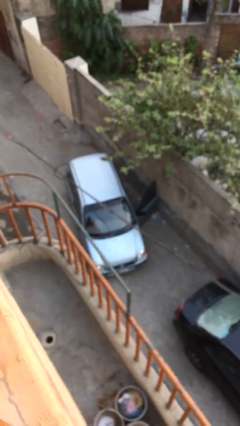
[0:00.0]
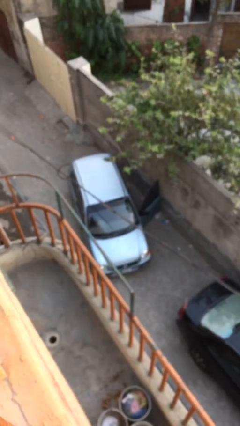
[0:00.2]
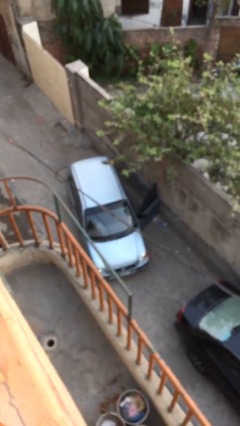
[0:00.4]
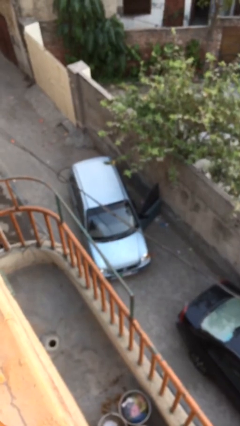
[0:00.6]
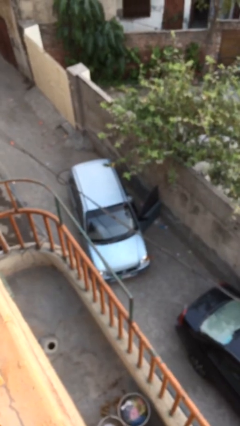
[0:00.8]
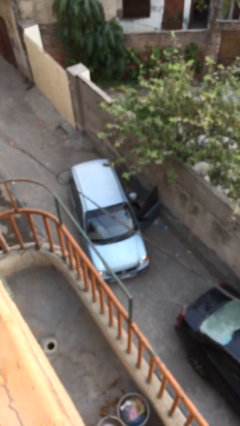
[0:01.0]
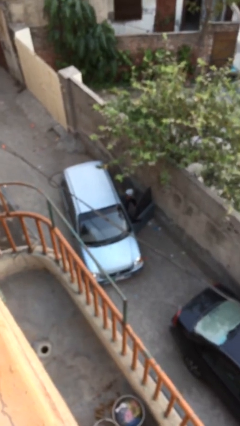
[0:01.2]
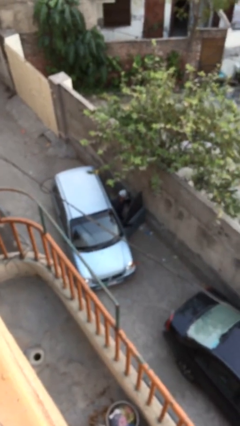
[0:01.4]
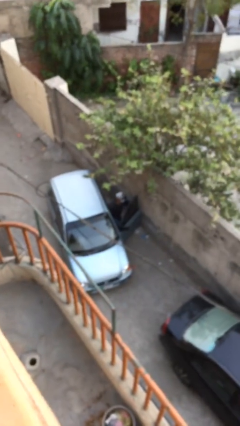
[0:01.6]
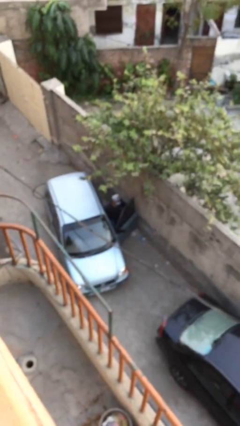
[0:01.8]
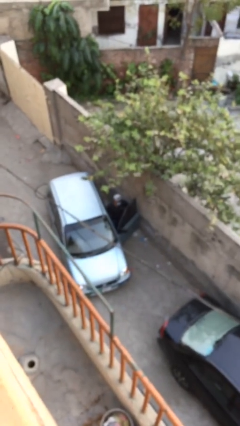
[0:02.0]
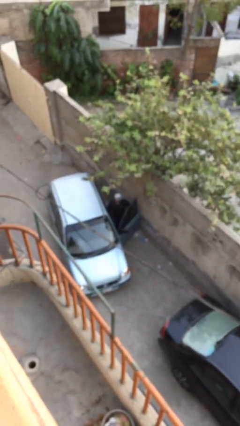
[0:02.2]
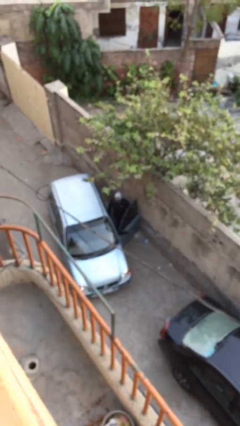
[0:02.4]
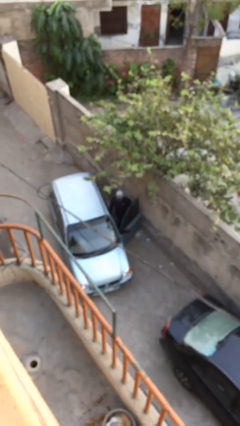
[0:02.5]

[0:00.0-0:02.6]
person exits car

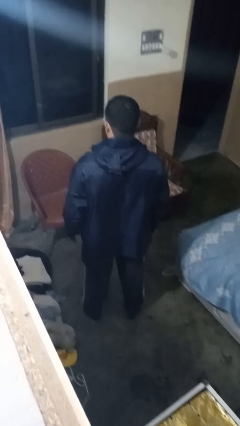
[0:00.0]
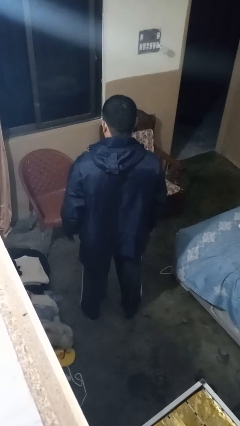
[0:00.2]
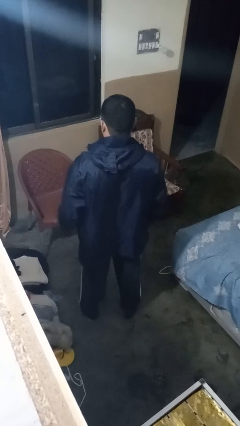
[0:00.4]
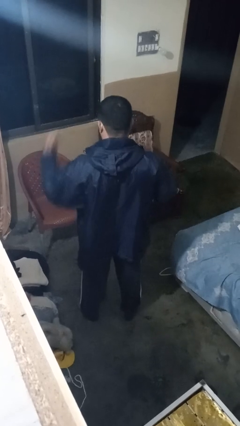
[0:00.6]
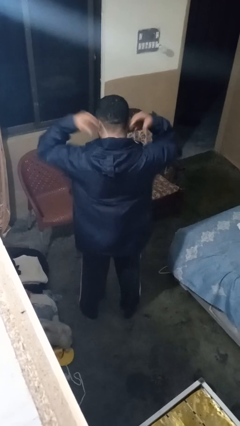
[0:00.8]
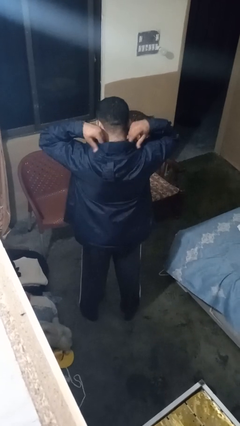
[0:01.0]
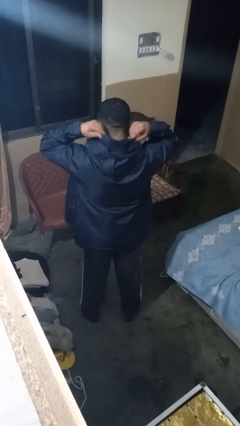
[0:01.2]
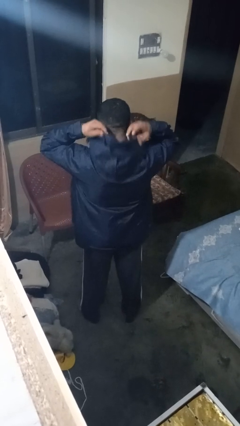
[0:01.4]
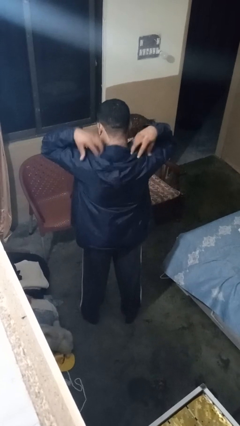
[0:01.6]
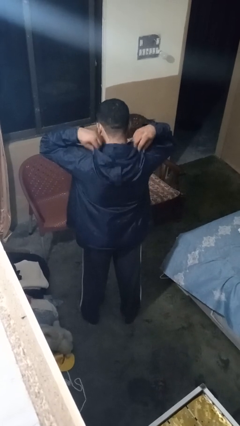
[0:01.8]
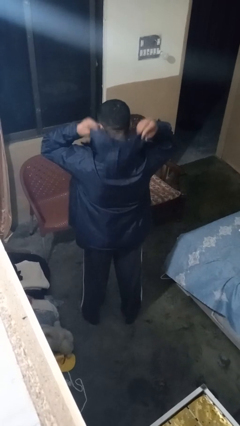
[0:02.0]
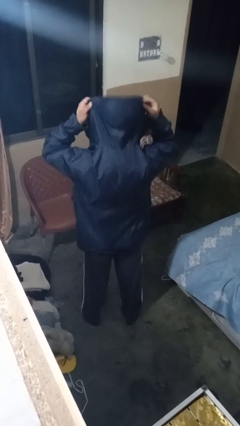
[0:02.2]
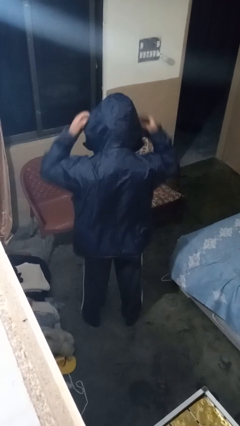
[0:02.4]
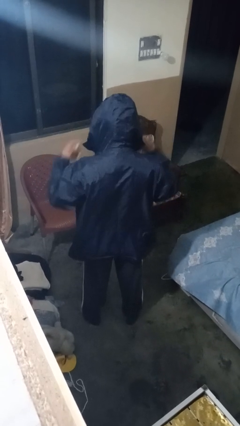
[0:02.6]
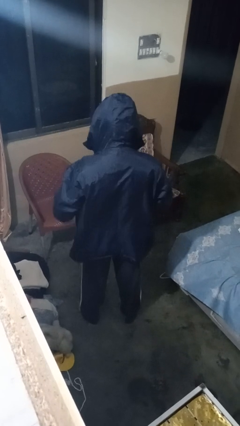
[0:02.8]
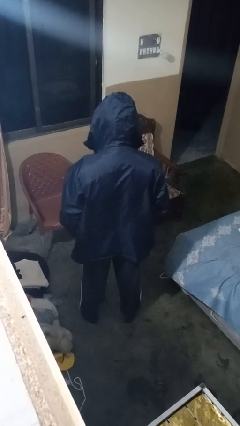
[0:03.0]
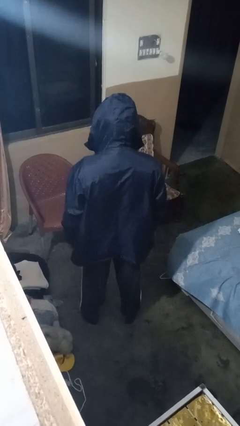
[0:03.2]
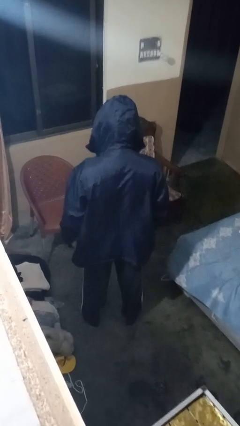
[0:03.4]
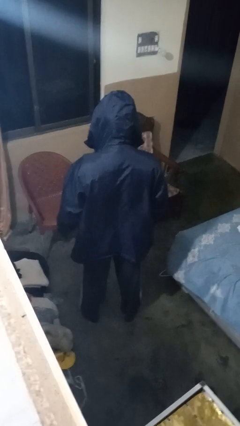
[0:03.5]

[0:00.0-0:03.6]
person puts on hoodie

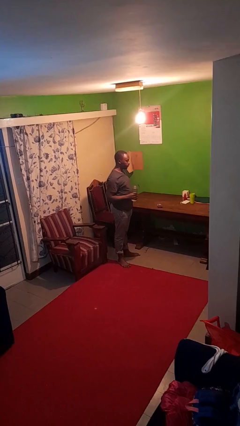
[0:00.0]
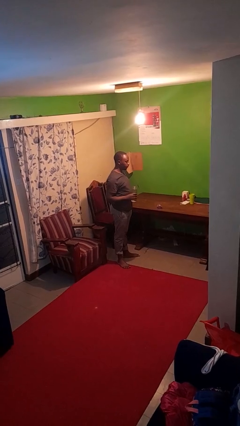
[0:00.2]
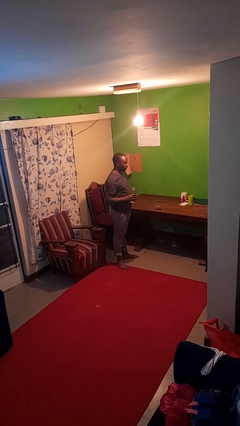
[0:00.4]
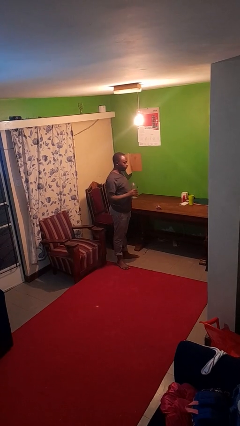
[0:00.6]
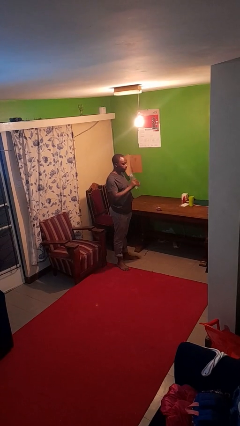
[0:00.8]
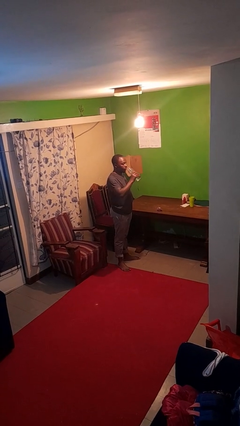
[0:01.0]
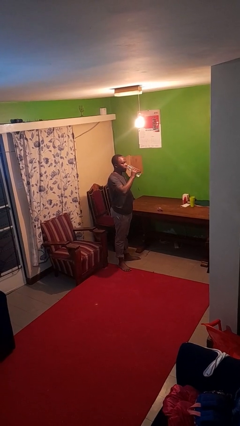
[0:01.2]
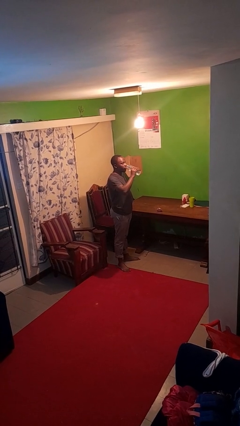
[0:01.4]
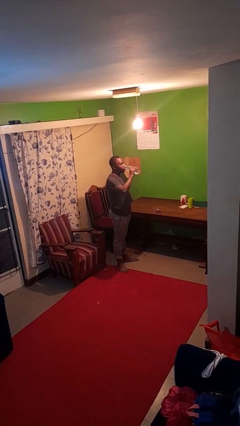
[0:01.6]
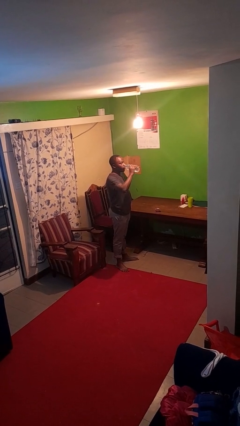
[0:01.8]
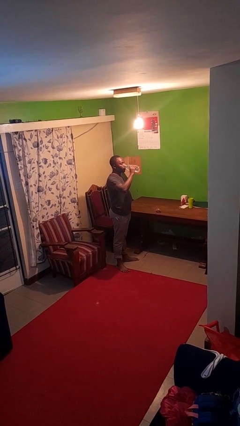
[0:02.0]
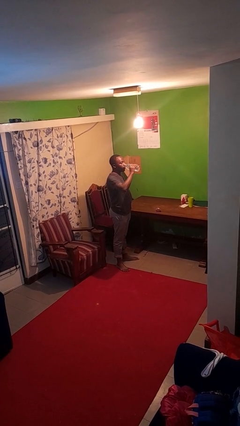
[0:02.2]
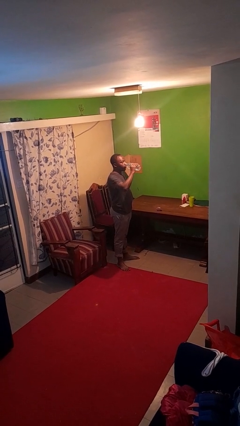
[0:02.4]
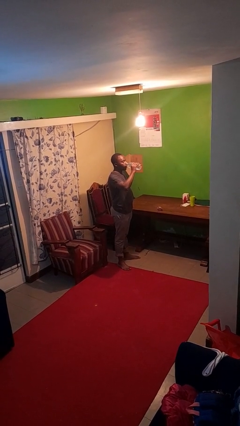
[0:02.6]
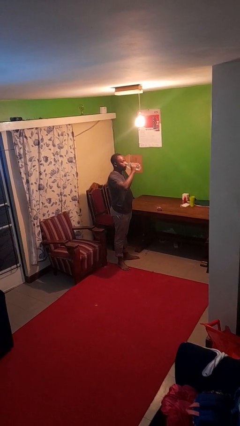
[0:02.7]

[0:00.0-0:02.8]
person drinks from bottle

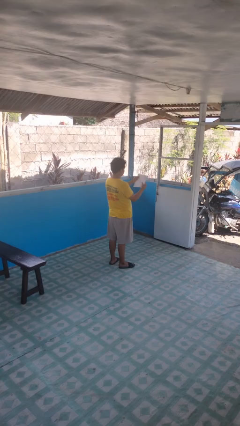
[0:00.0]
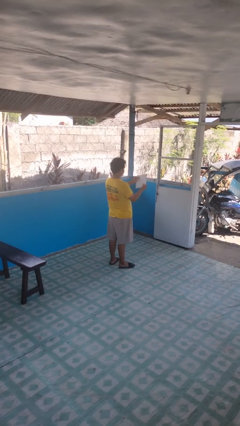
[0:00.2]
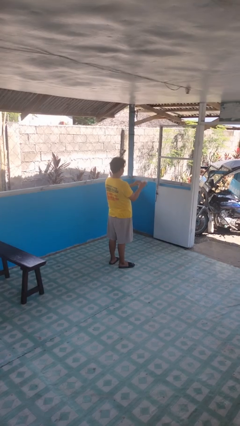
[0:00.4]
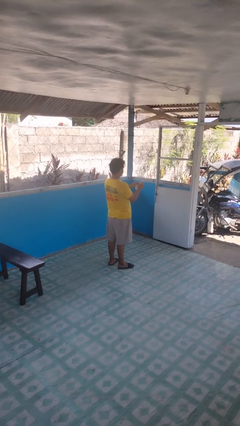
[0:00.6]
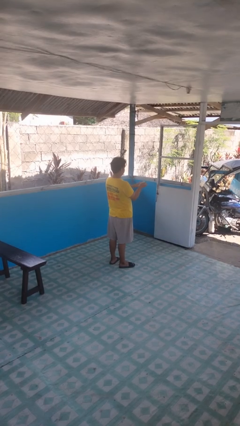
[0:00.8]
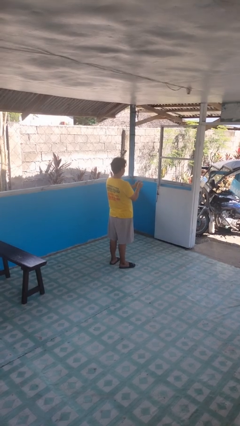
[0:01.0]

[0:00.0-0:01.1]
person crumples paper

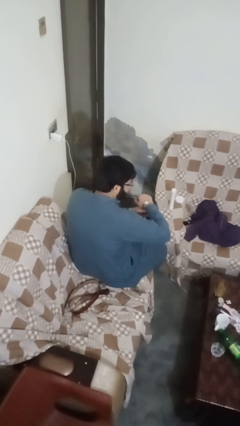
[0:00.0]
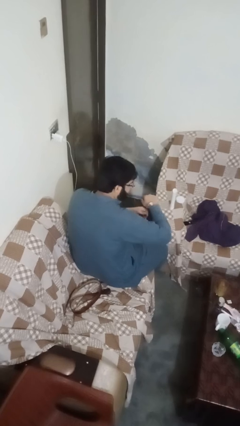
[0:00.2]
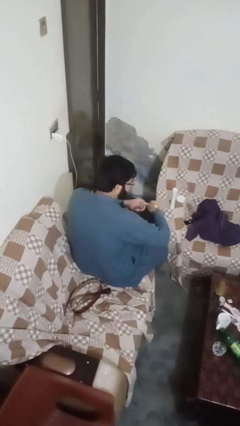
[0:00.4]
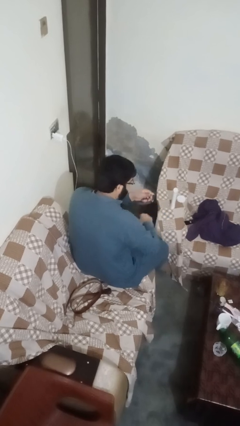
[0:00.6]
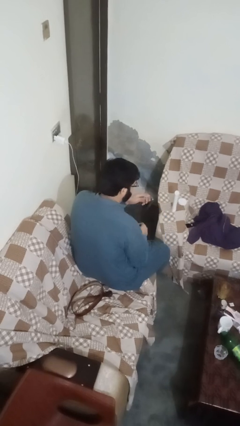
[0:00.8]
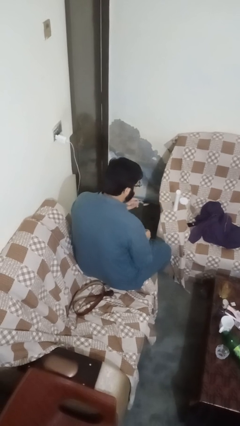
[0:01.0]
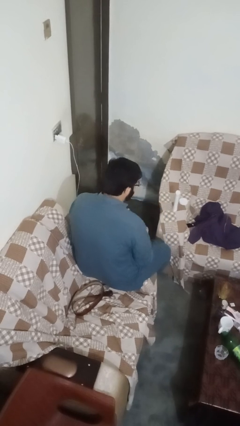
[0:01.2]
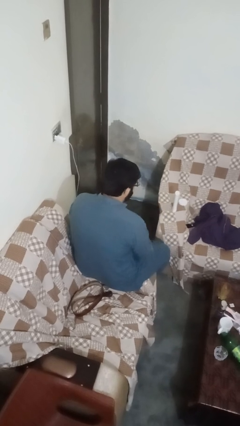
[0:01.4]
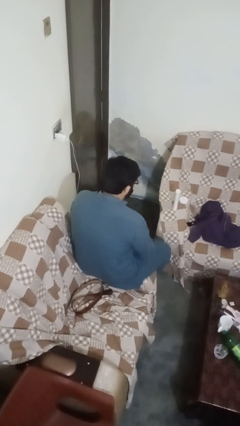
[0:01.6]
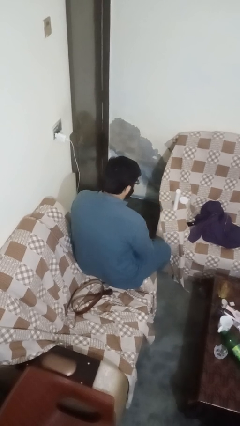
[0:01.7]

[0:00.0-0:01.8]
person takes off wristwatch

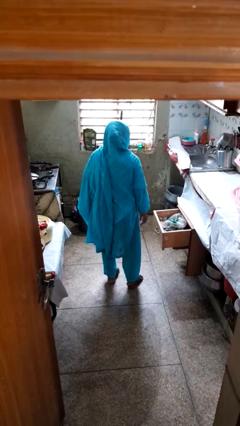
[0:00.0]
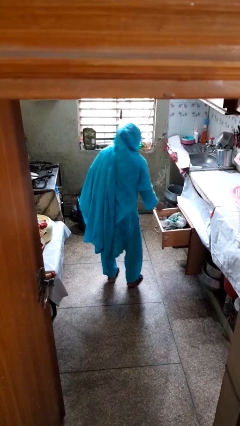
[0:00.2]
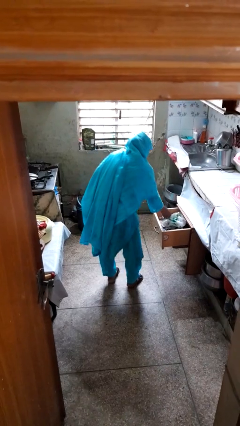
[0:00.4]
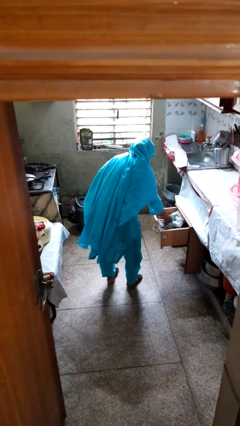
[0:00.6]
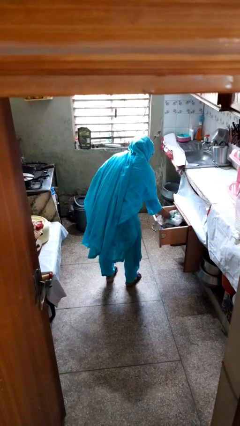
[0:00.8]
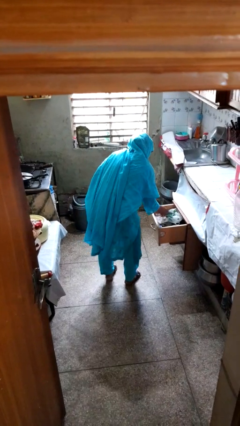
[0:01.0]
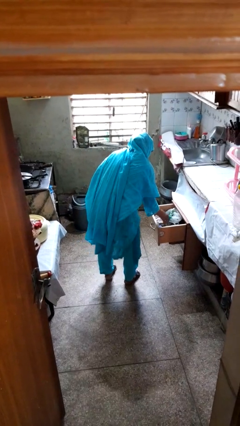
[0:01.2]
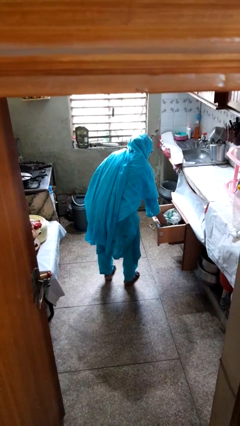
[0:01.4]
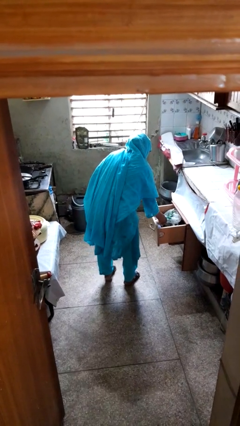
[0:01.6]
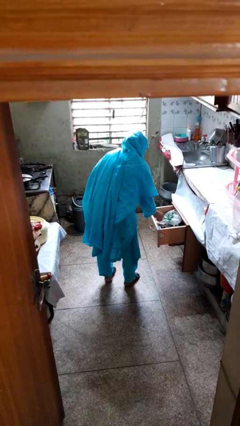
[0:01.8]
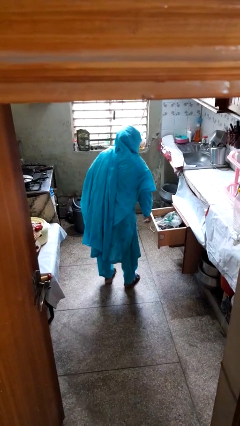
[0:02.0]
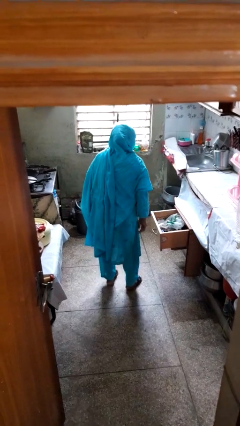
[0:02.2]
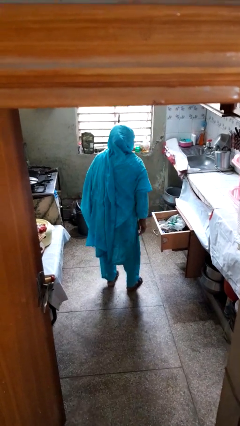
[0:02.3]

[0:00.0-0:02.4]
person searches in kitchen drawer

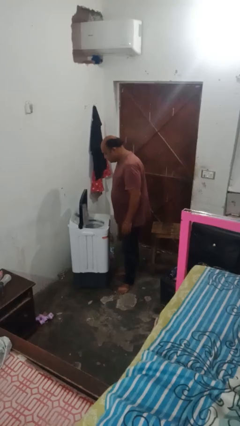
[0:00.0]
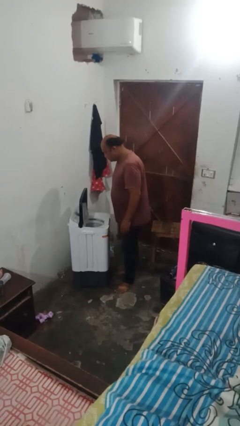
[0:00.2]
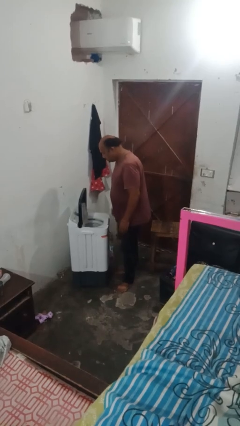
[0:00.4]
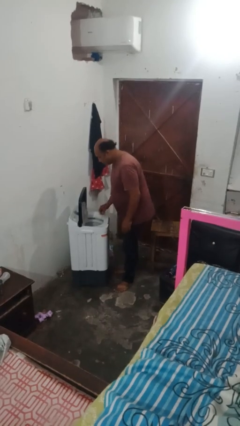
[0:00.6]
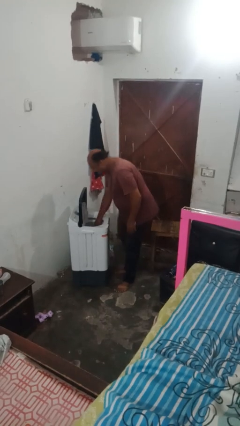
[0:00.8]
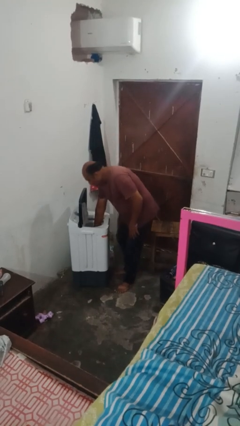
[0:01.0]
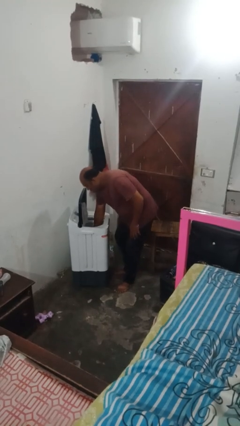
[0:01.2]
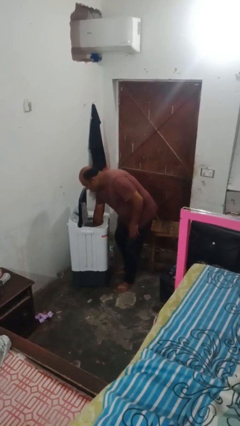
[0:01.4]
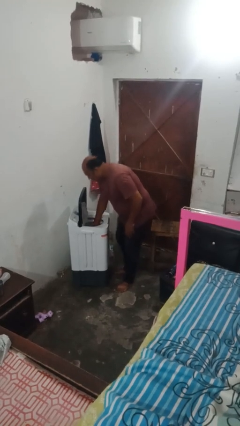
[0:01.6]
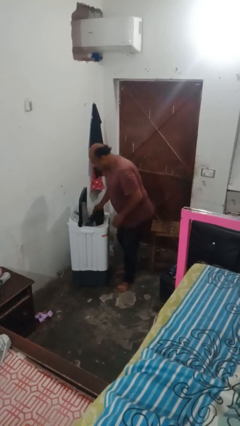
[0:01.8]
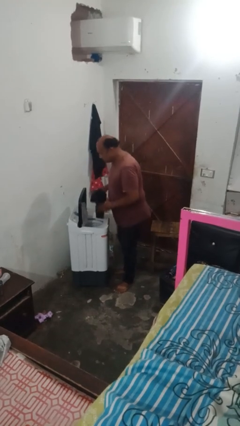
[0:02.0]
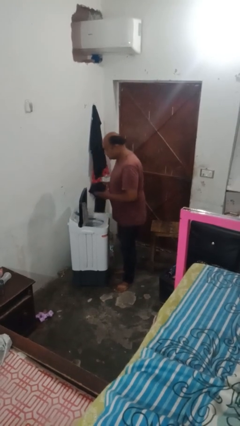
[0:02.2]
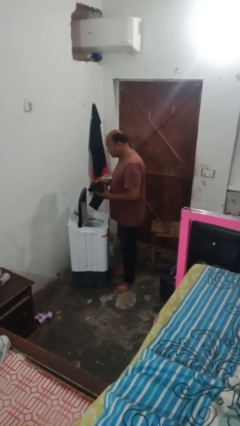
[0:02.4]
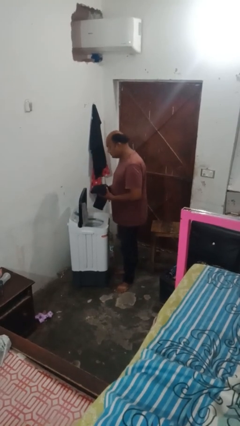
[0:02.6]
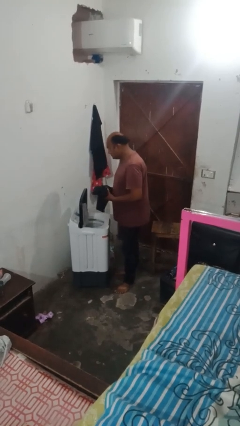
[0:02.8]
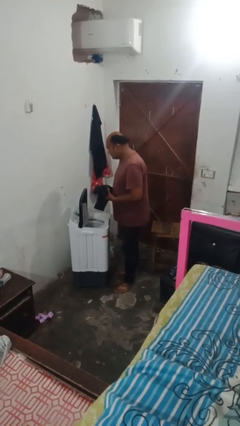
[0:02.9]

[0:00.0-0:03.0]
person unloads clotheswasher

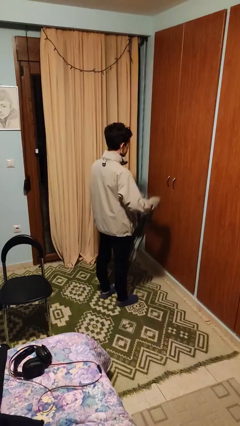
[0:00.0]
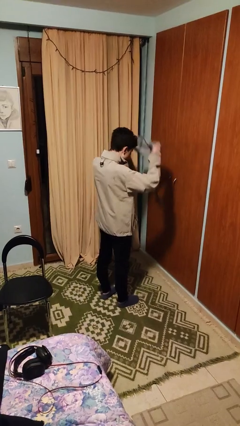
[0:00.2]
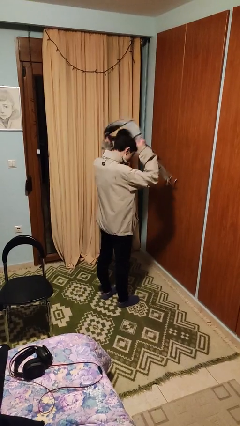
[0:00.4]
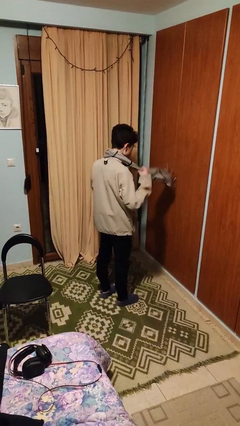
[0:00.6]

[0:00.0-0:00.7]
person puts on scarf
